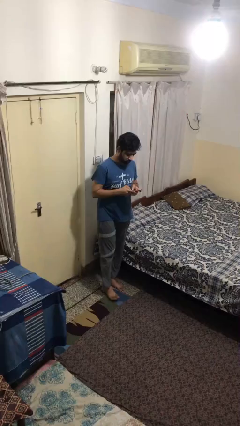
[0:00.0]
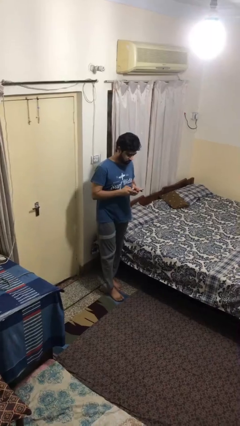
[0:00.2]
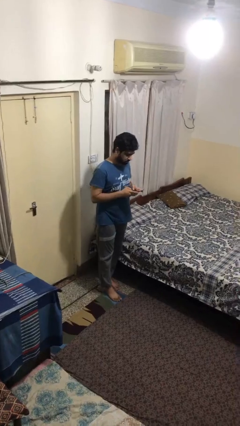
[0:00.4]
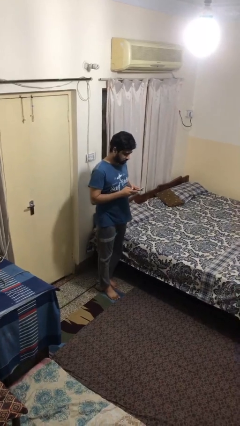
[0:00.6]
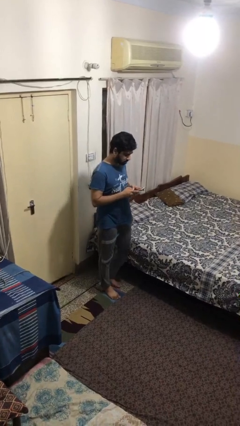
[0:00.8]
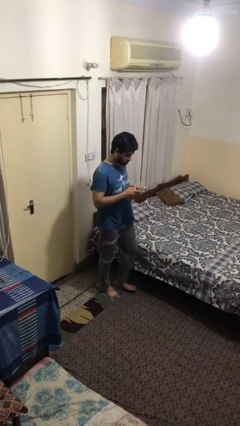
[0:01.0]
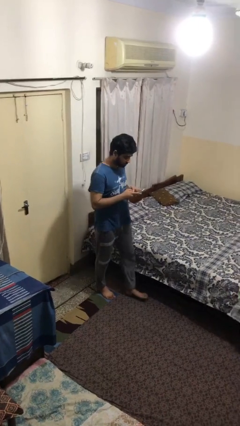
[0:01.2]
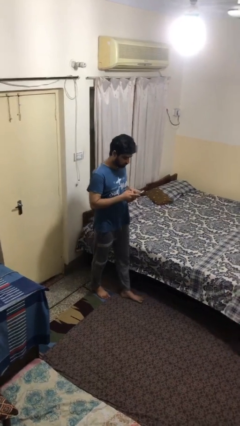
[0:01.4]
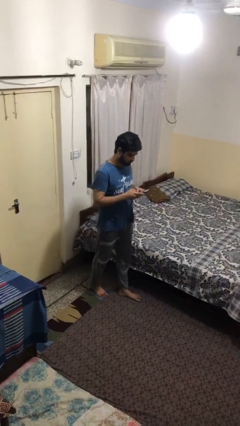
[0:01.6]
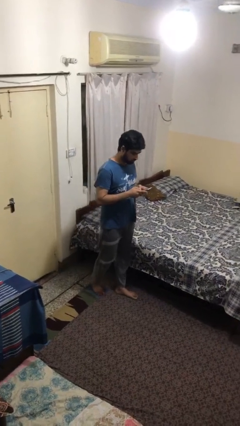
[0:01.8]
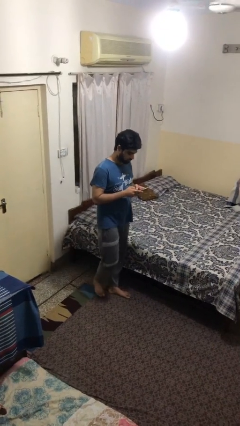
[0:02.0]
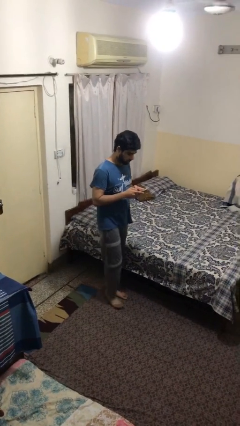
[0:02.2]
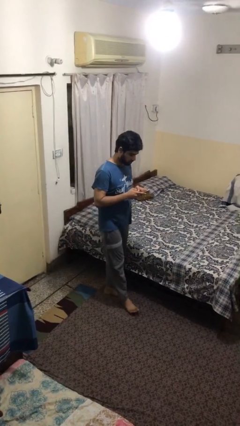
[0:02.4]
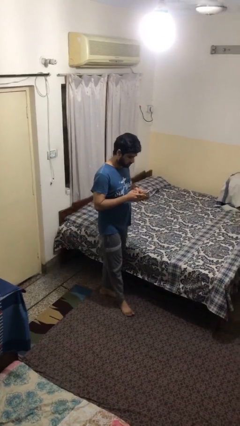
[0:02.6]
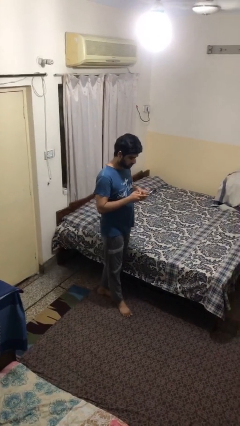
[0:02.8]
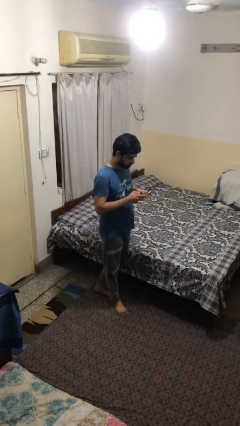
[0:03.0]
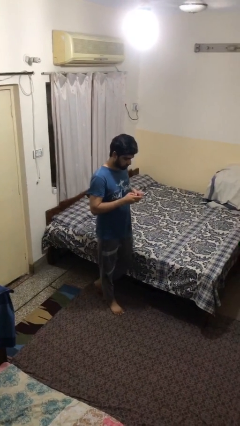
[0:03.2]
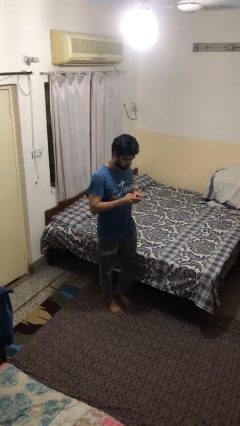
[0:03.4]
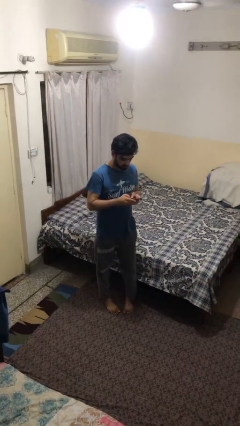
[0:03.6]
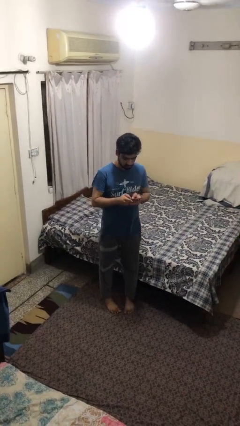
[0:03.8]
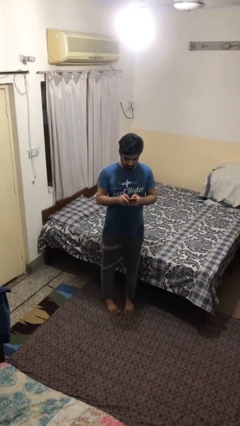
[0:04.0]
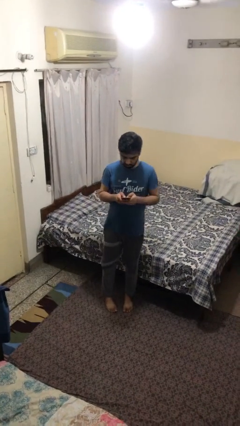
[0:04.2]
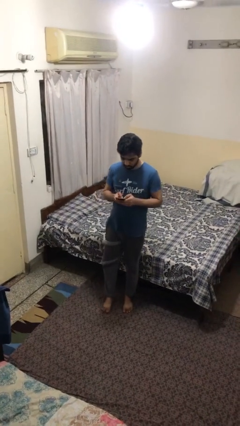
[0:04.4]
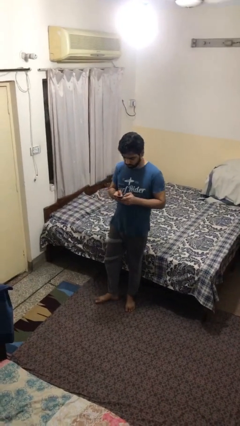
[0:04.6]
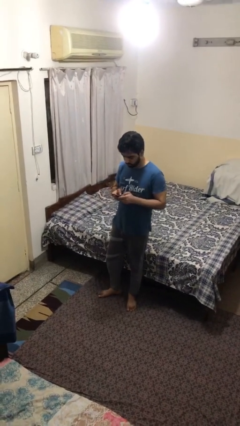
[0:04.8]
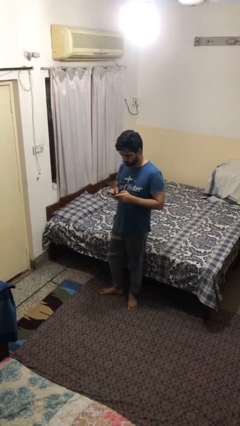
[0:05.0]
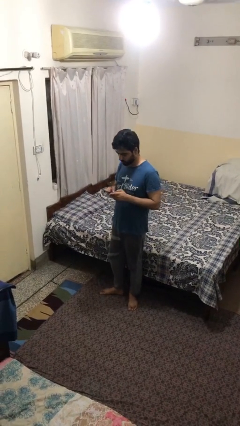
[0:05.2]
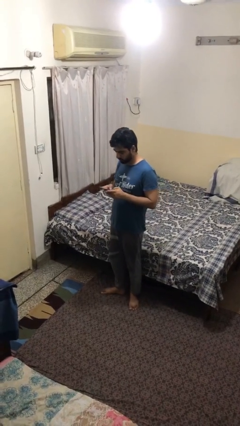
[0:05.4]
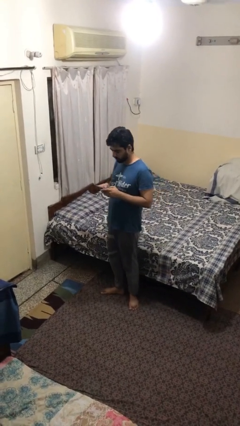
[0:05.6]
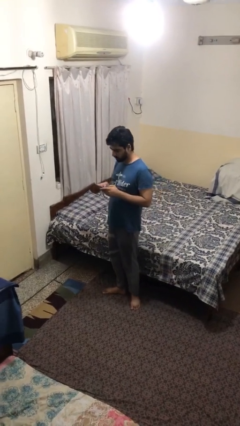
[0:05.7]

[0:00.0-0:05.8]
person texts on phone

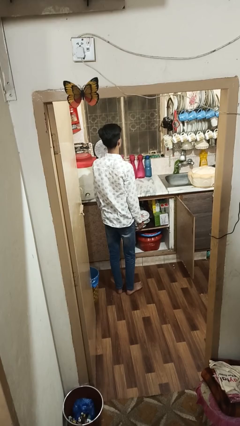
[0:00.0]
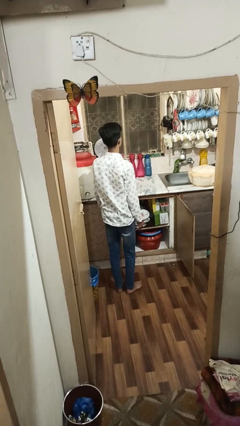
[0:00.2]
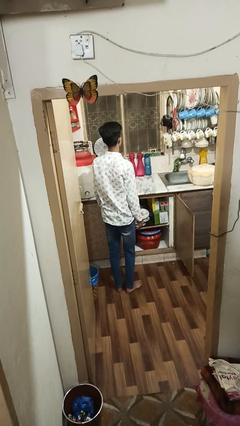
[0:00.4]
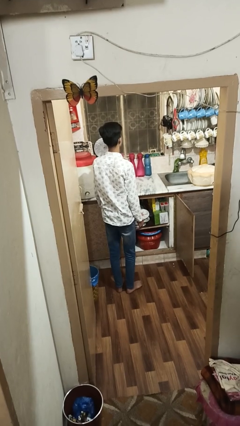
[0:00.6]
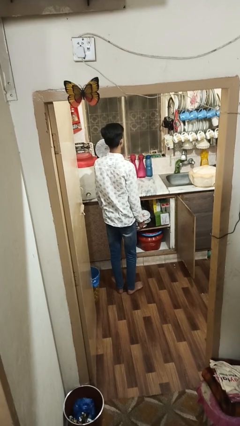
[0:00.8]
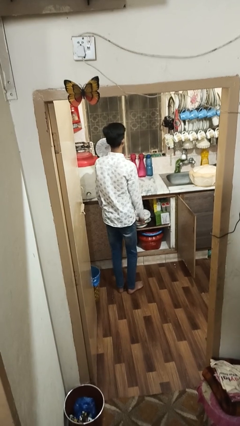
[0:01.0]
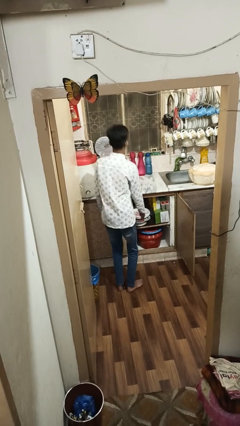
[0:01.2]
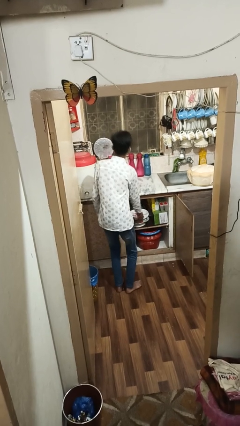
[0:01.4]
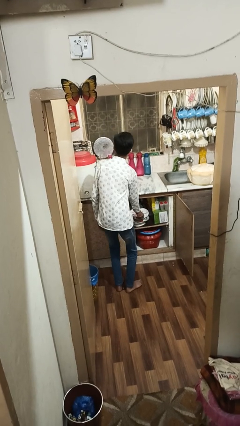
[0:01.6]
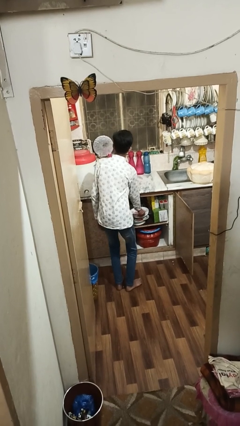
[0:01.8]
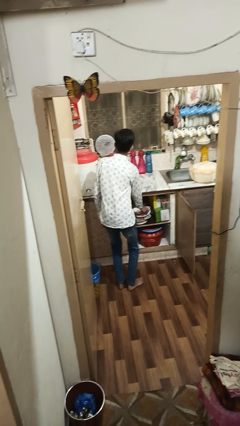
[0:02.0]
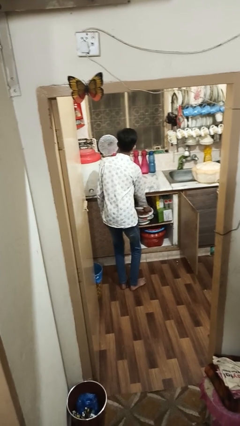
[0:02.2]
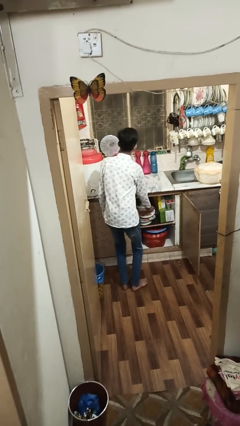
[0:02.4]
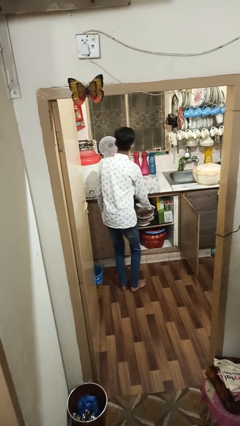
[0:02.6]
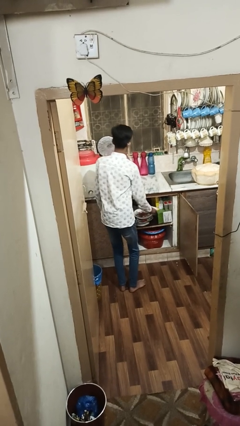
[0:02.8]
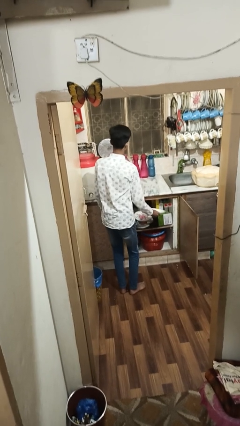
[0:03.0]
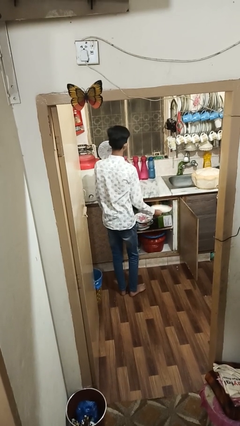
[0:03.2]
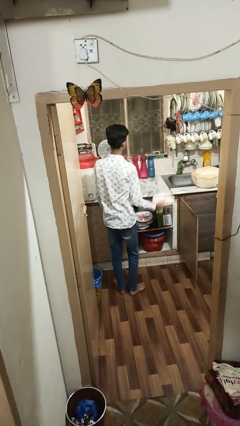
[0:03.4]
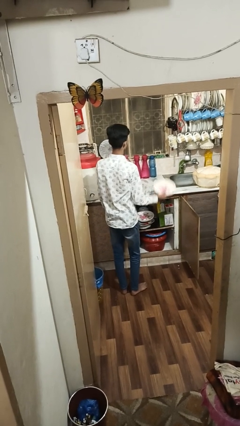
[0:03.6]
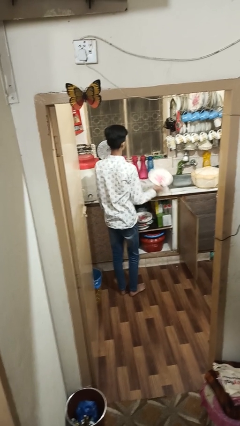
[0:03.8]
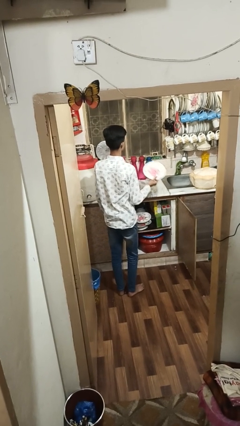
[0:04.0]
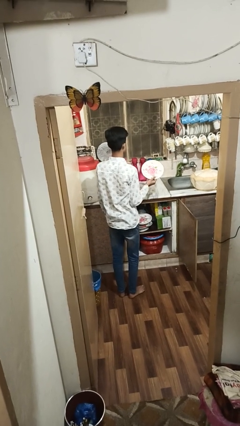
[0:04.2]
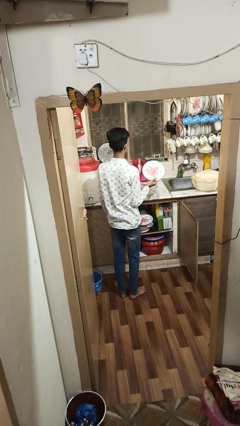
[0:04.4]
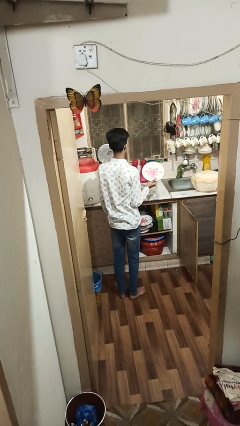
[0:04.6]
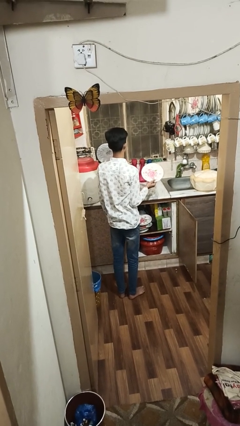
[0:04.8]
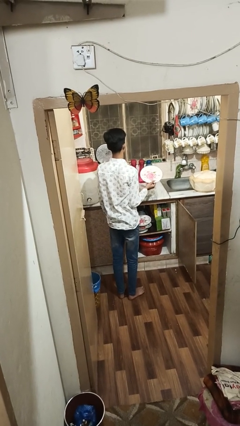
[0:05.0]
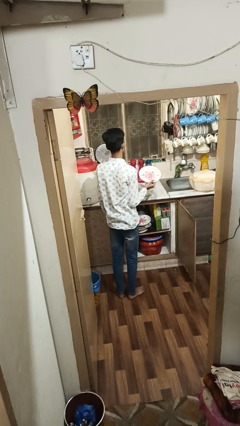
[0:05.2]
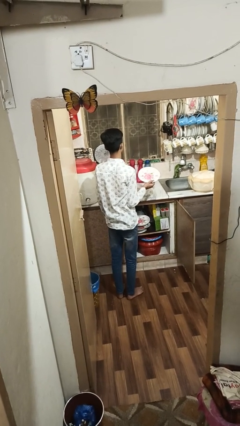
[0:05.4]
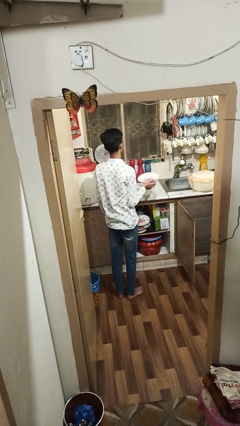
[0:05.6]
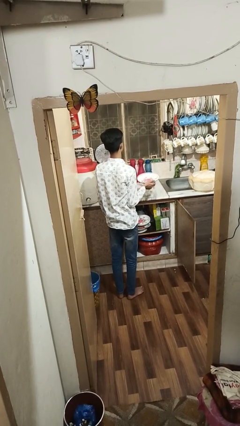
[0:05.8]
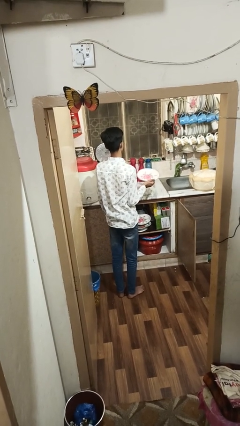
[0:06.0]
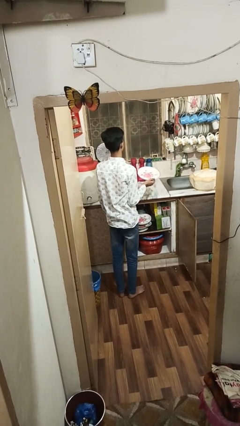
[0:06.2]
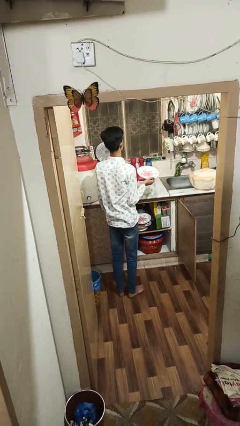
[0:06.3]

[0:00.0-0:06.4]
person takes object from cabinet

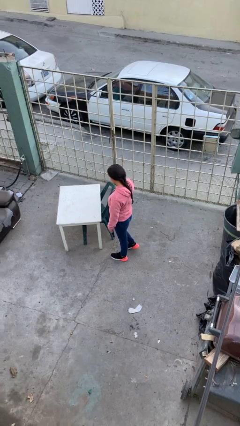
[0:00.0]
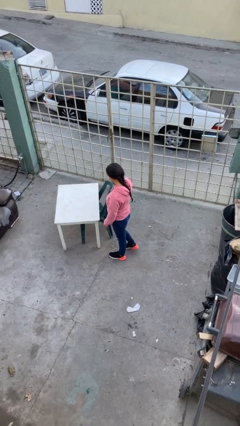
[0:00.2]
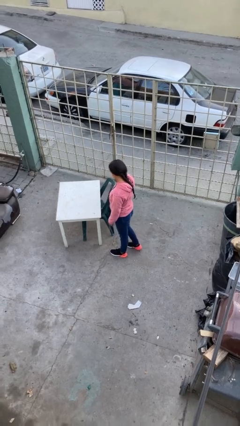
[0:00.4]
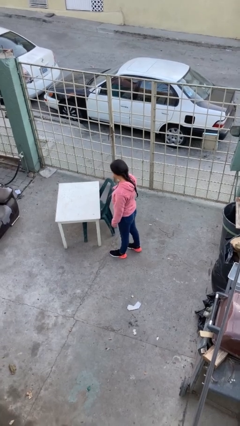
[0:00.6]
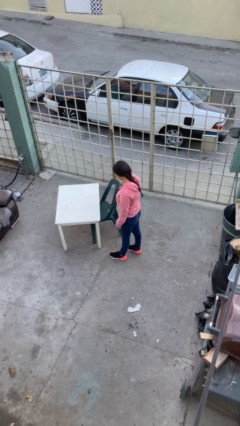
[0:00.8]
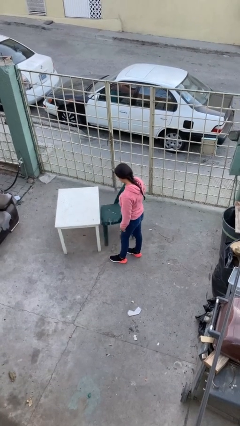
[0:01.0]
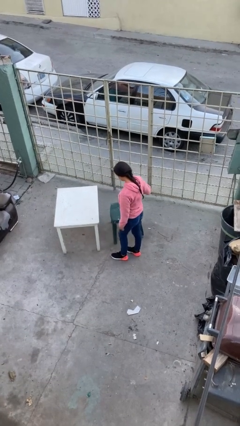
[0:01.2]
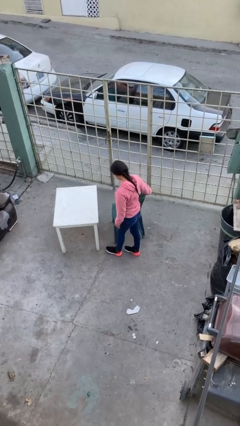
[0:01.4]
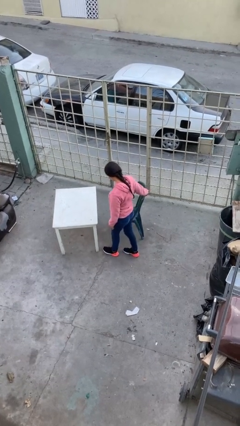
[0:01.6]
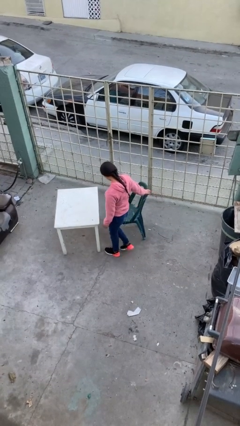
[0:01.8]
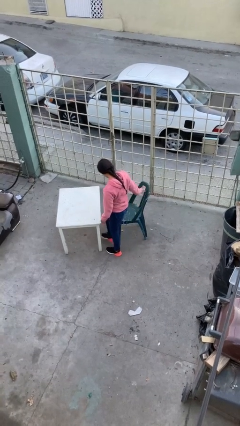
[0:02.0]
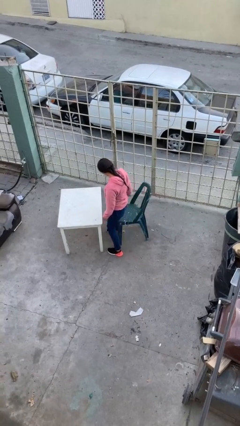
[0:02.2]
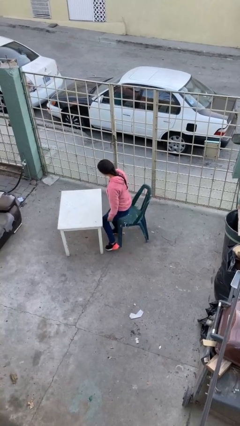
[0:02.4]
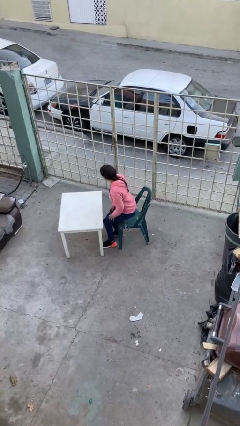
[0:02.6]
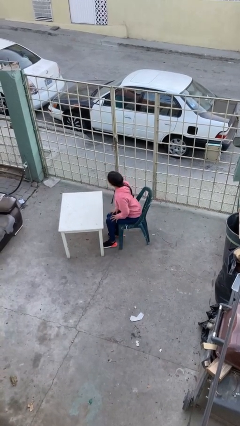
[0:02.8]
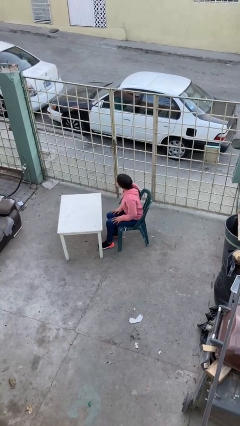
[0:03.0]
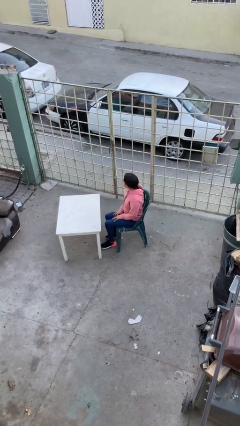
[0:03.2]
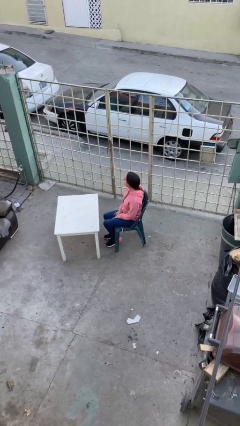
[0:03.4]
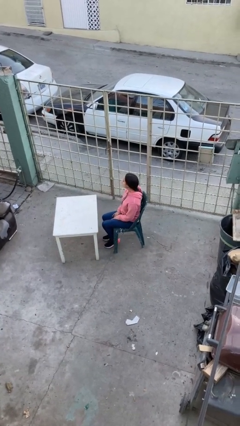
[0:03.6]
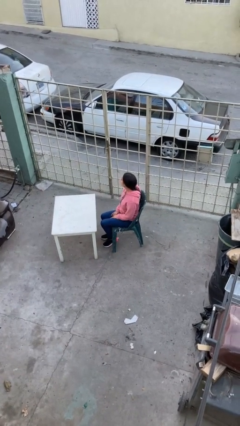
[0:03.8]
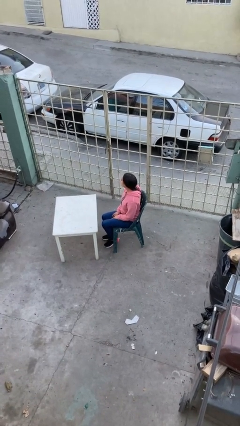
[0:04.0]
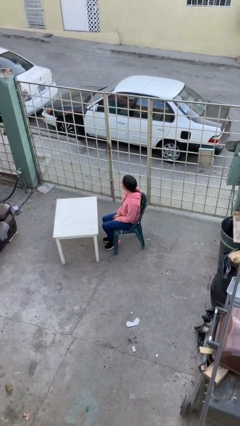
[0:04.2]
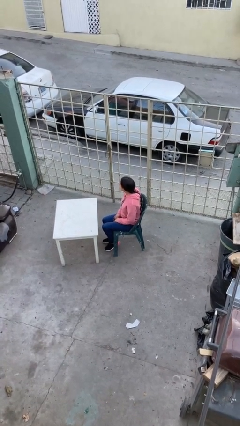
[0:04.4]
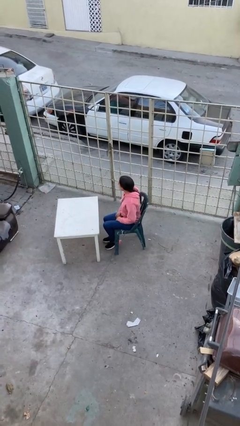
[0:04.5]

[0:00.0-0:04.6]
person sits down

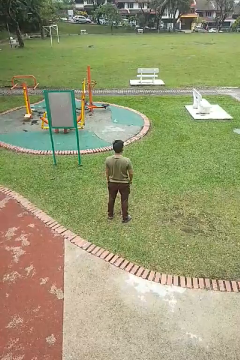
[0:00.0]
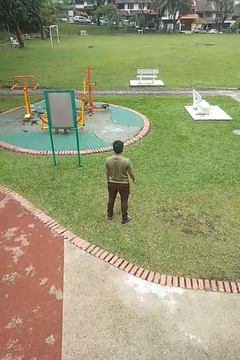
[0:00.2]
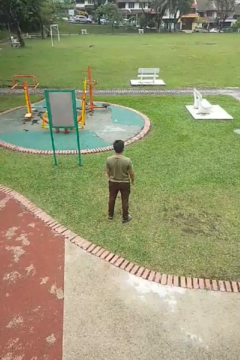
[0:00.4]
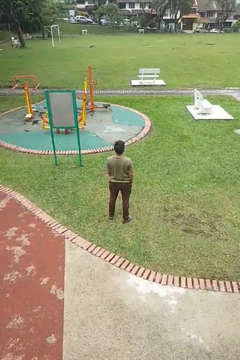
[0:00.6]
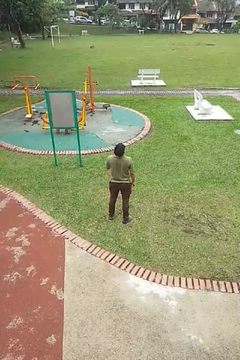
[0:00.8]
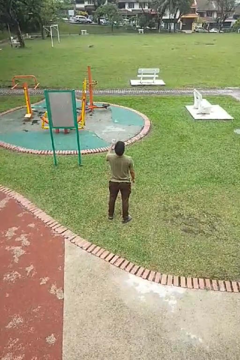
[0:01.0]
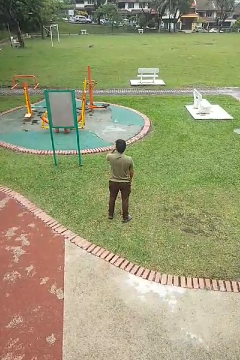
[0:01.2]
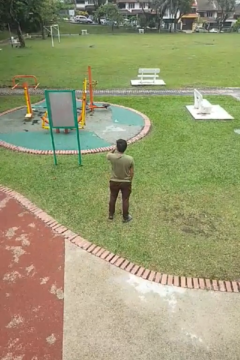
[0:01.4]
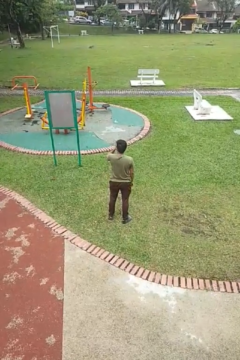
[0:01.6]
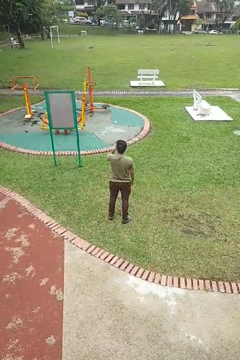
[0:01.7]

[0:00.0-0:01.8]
person sneezes into hand
